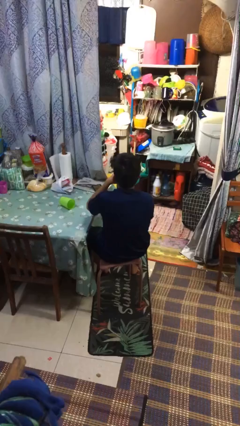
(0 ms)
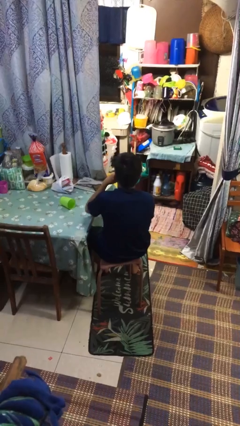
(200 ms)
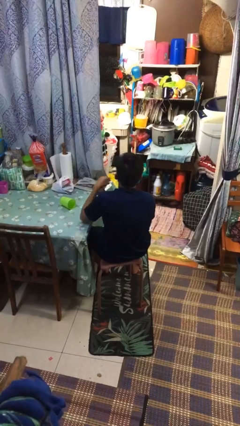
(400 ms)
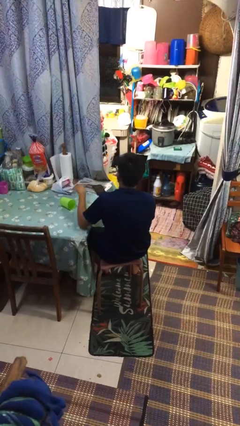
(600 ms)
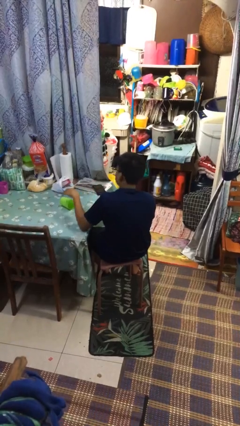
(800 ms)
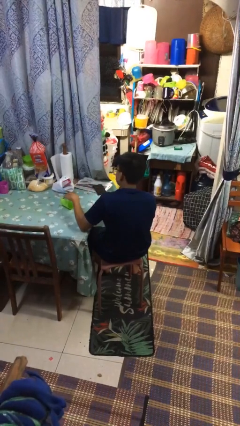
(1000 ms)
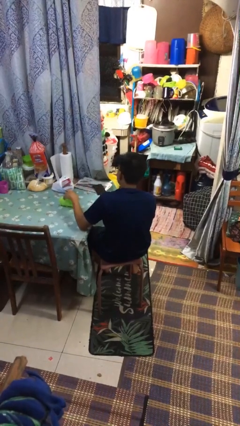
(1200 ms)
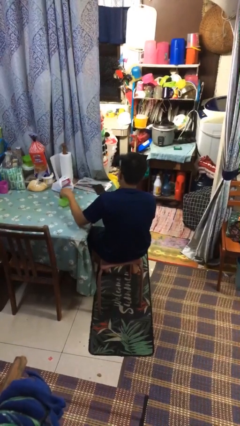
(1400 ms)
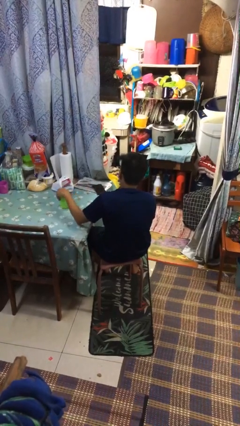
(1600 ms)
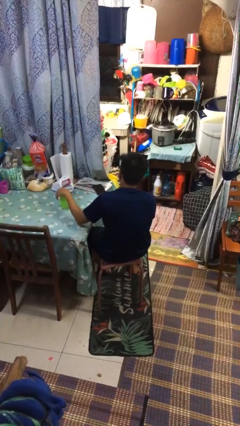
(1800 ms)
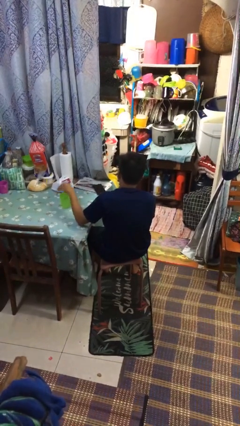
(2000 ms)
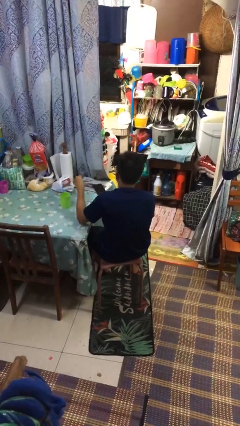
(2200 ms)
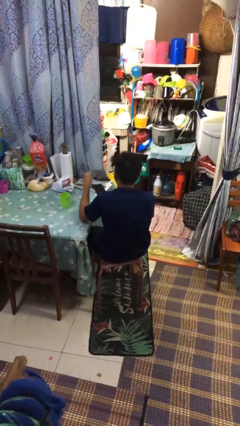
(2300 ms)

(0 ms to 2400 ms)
person sets upright glass

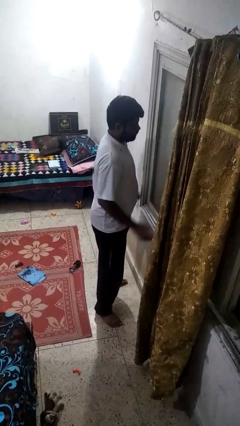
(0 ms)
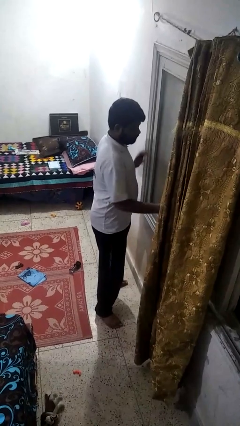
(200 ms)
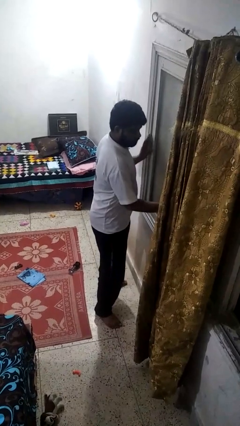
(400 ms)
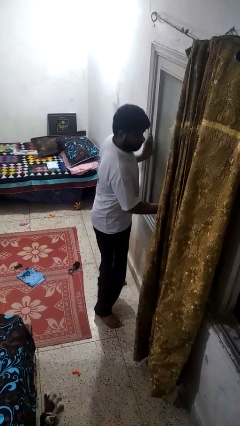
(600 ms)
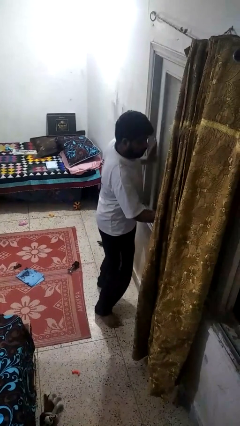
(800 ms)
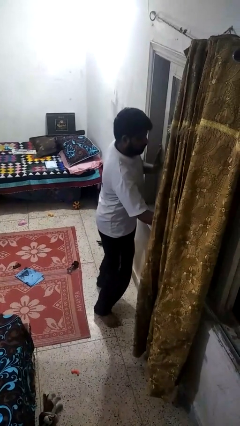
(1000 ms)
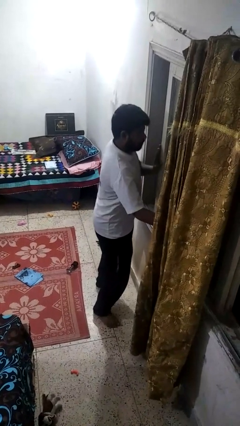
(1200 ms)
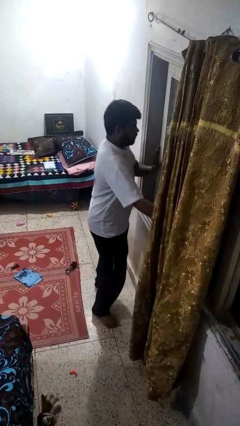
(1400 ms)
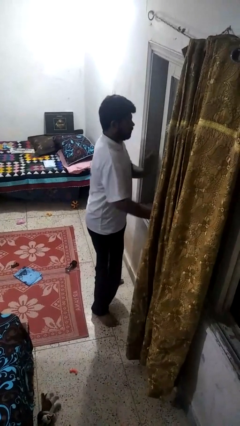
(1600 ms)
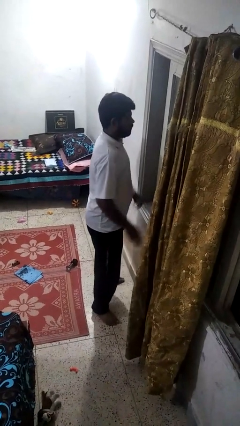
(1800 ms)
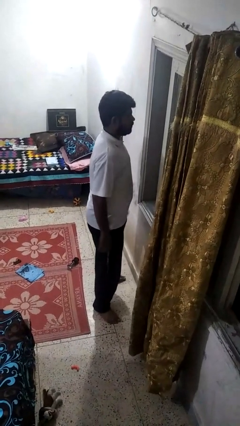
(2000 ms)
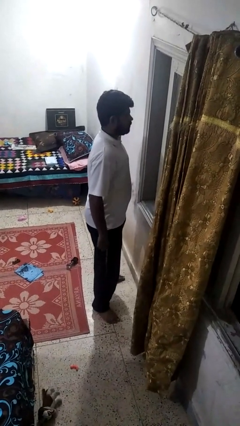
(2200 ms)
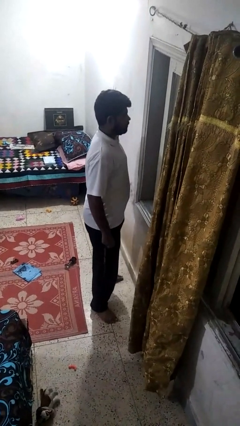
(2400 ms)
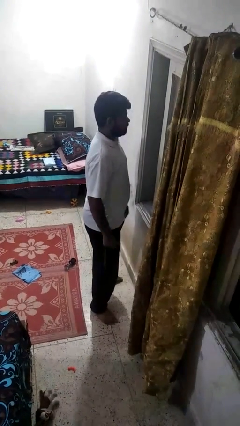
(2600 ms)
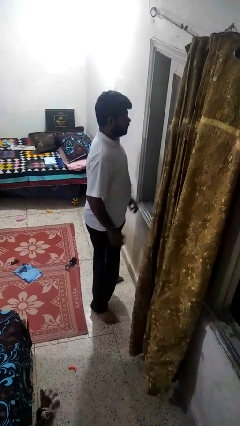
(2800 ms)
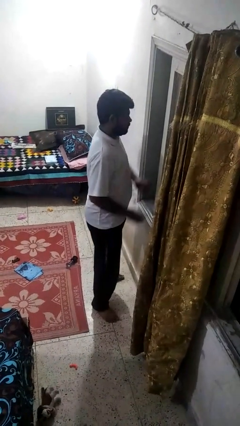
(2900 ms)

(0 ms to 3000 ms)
person opens sliding door

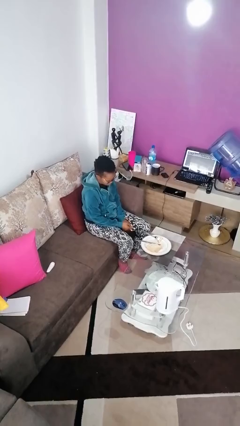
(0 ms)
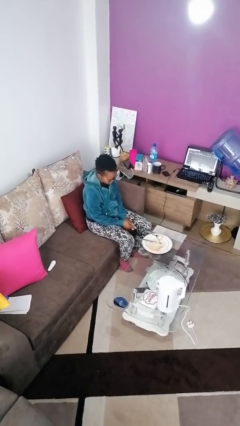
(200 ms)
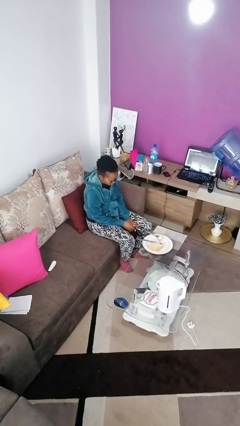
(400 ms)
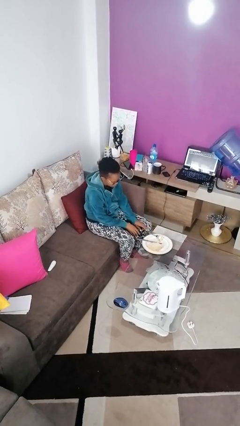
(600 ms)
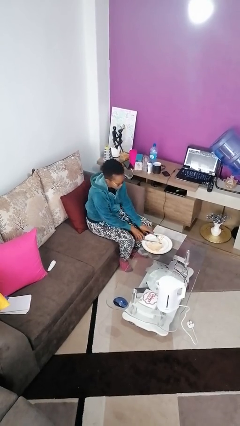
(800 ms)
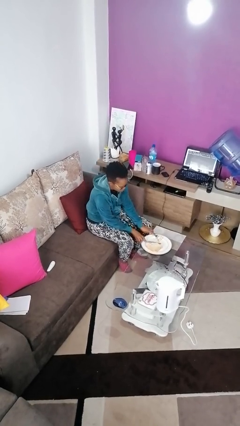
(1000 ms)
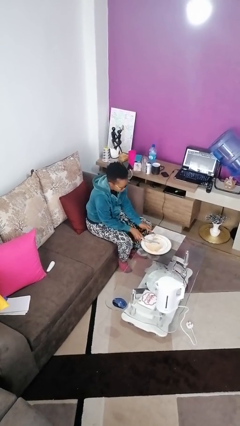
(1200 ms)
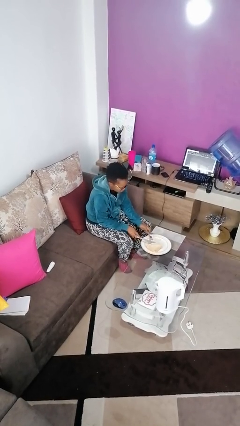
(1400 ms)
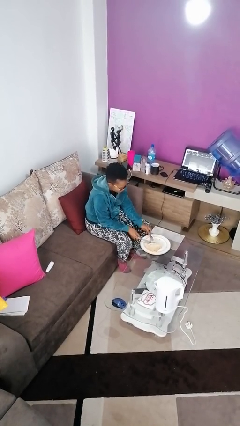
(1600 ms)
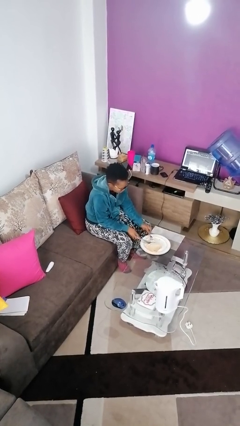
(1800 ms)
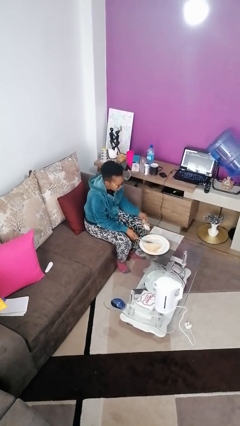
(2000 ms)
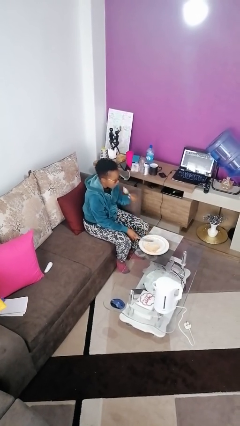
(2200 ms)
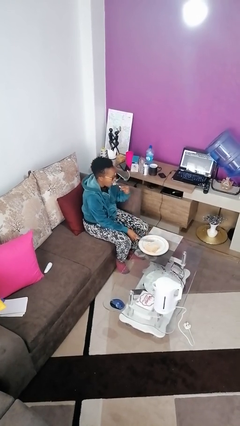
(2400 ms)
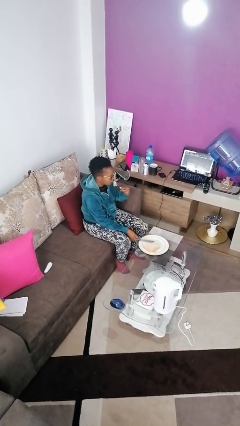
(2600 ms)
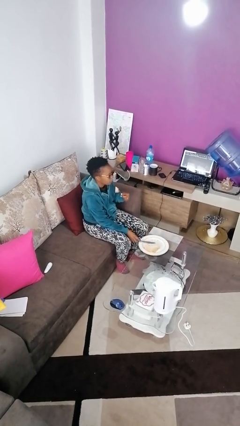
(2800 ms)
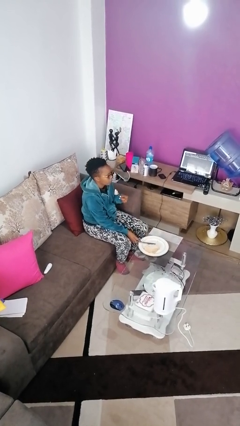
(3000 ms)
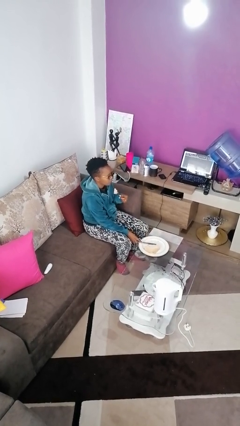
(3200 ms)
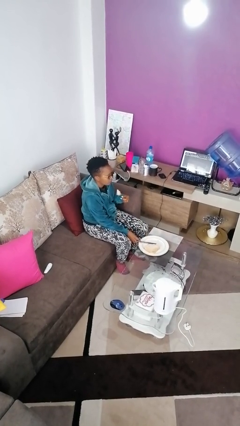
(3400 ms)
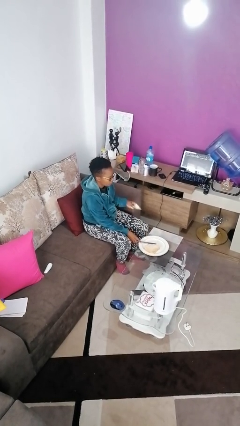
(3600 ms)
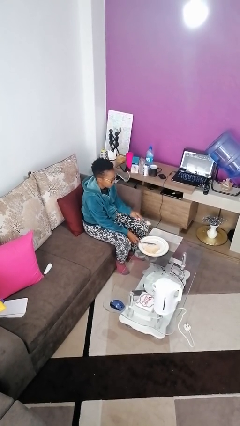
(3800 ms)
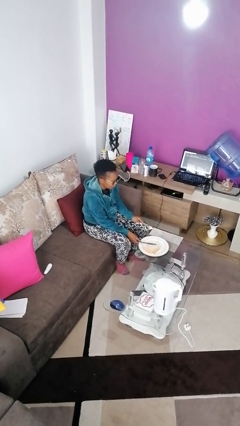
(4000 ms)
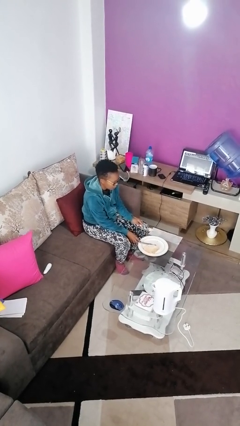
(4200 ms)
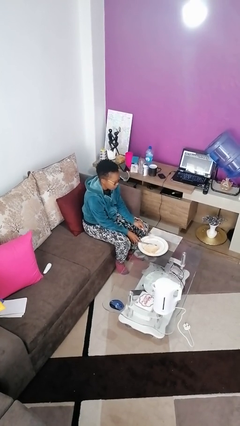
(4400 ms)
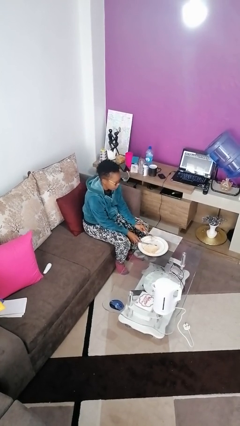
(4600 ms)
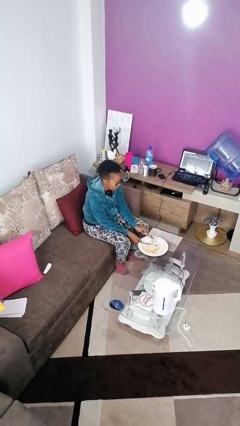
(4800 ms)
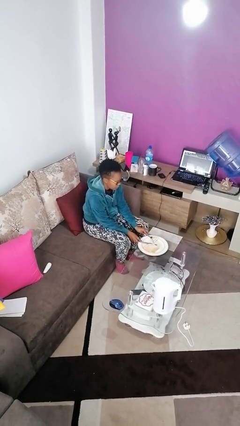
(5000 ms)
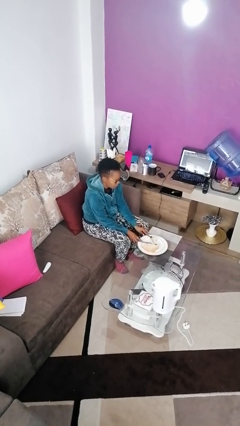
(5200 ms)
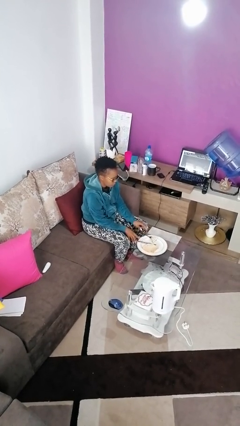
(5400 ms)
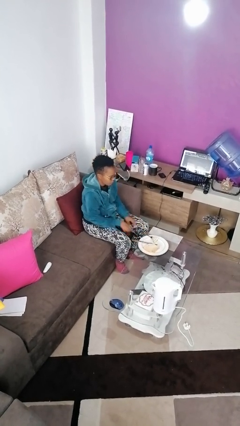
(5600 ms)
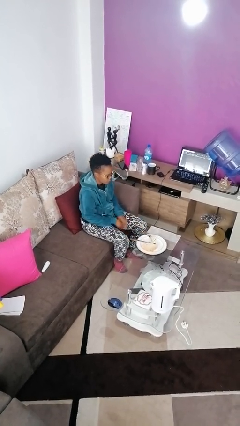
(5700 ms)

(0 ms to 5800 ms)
person eats with utensil

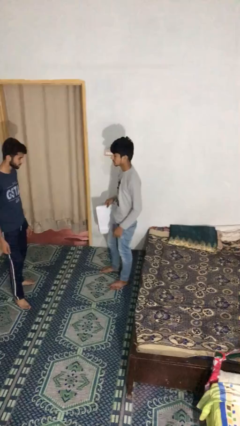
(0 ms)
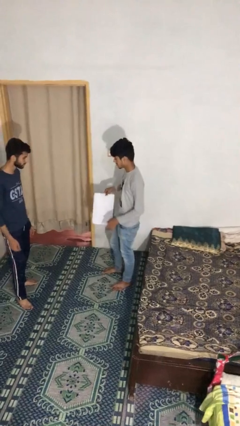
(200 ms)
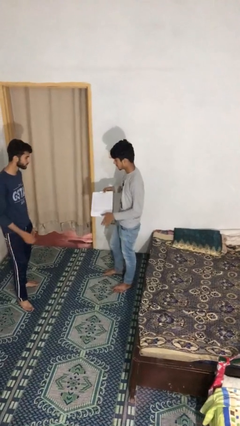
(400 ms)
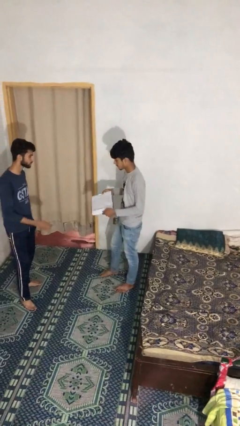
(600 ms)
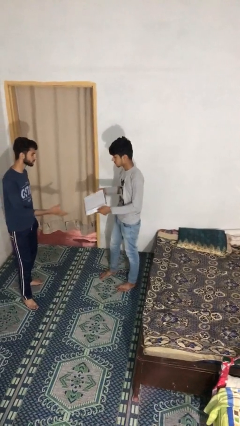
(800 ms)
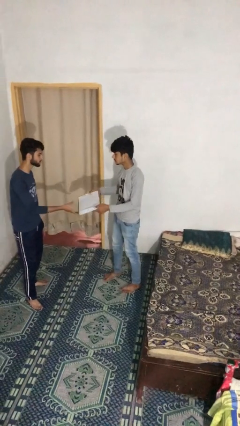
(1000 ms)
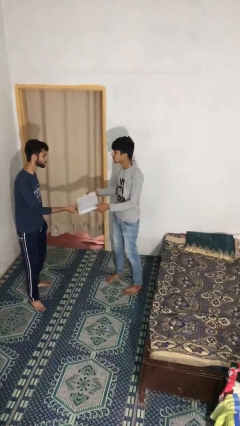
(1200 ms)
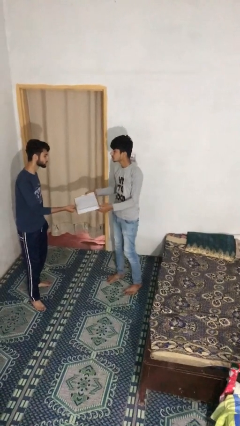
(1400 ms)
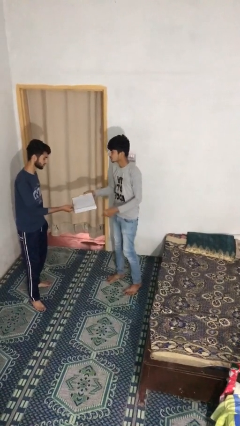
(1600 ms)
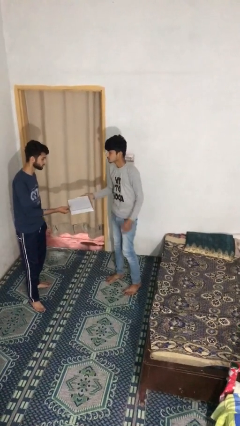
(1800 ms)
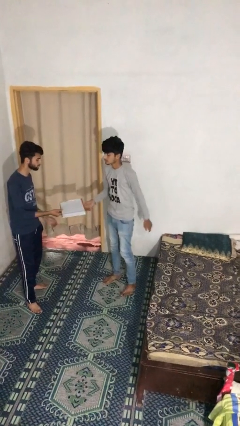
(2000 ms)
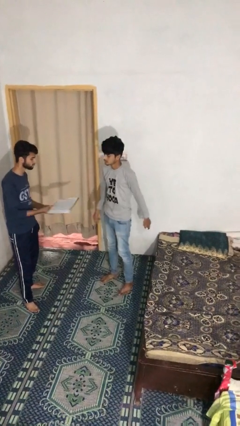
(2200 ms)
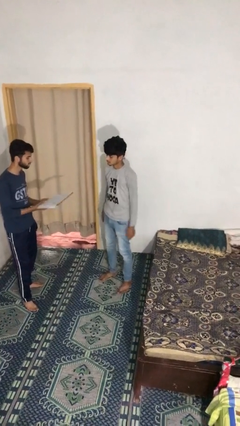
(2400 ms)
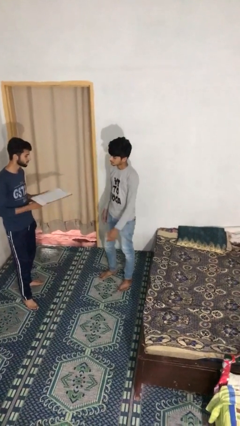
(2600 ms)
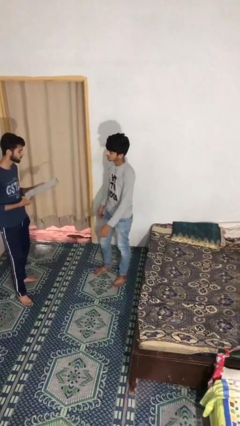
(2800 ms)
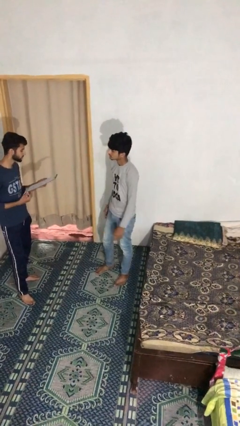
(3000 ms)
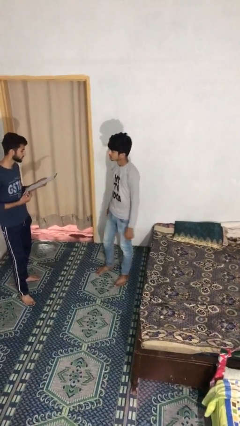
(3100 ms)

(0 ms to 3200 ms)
person transfers object to person

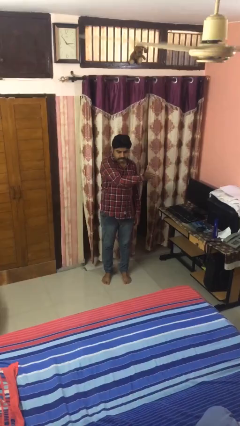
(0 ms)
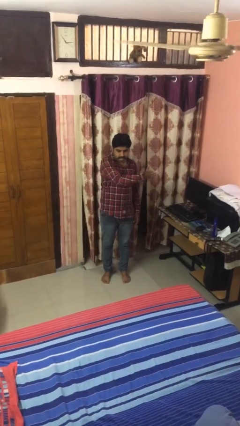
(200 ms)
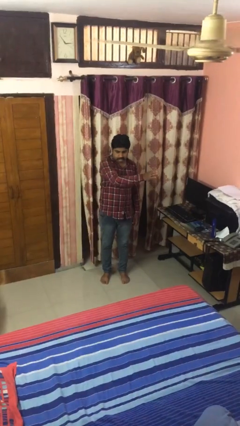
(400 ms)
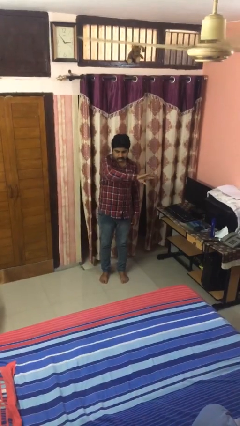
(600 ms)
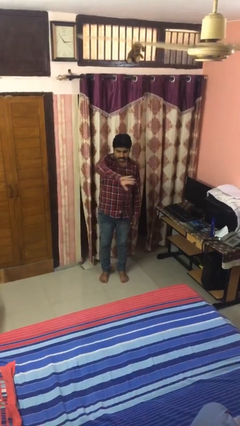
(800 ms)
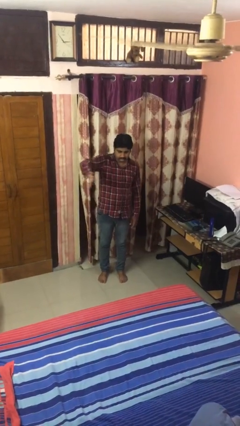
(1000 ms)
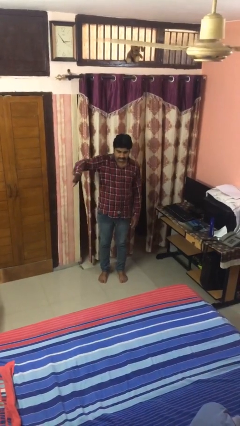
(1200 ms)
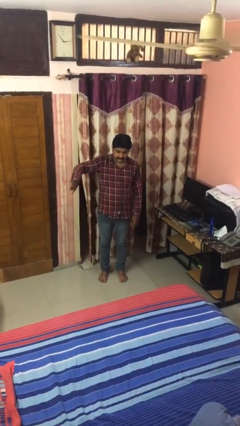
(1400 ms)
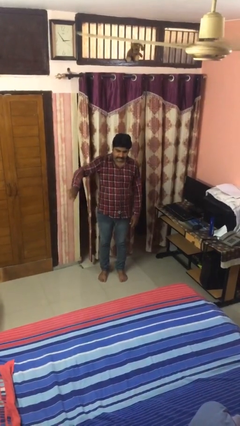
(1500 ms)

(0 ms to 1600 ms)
person gestures swipe right

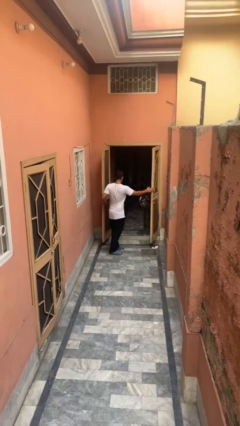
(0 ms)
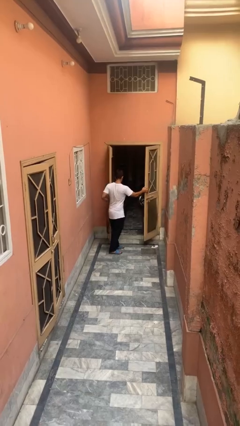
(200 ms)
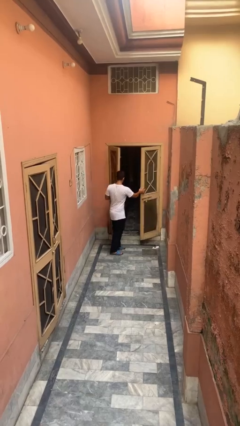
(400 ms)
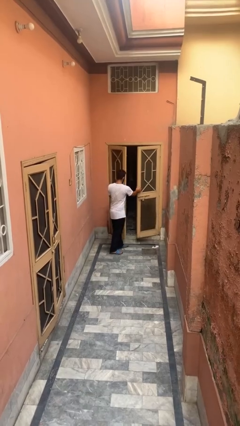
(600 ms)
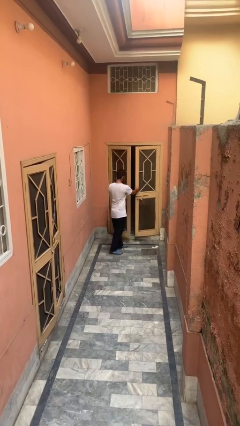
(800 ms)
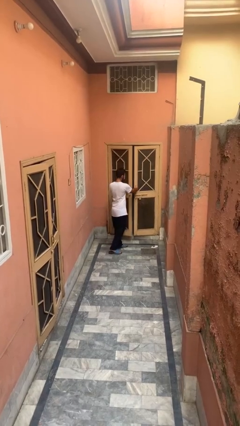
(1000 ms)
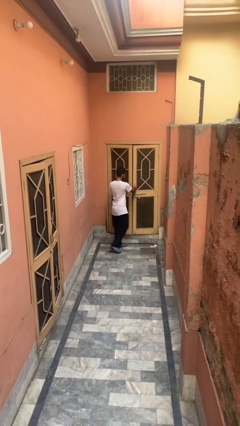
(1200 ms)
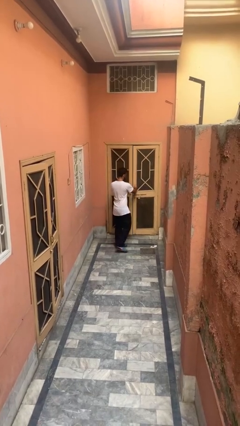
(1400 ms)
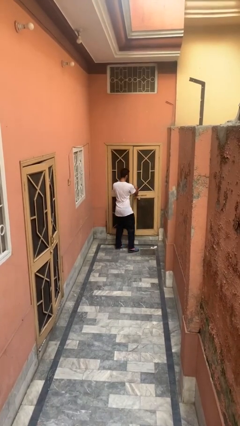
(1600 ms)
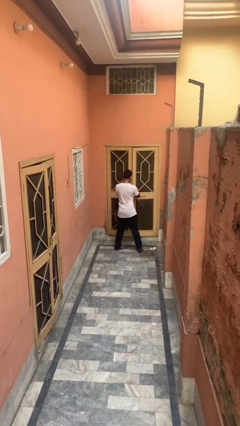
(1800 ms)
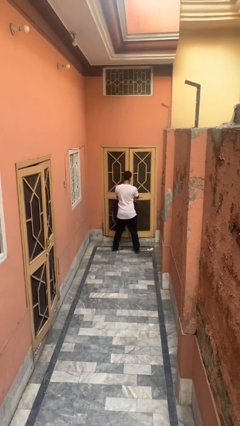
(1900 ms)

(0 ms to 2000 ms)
person closes gate
